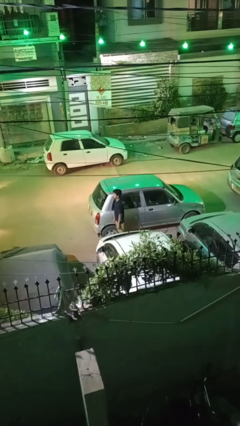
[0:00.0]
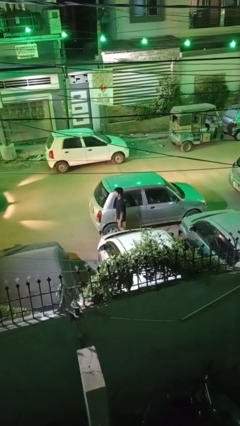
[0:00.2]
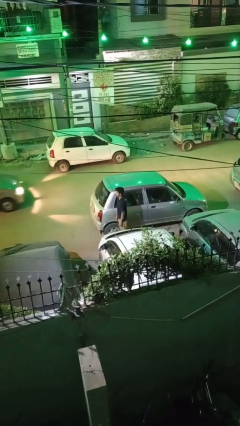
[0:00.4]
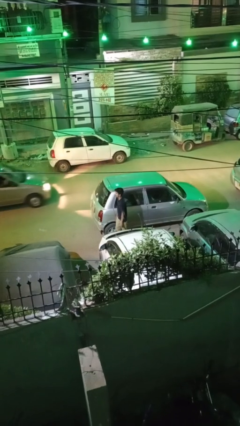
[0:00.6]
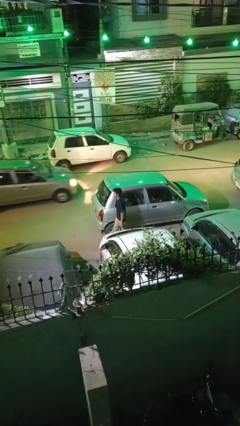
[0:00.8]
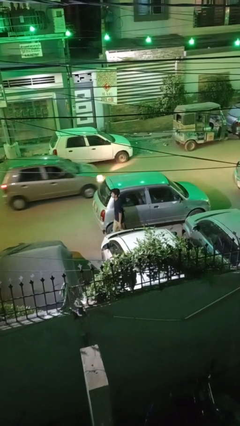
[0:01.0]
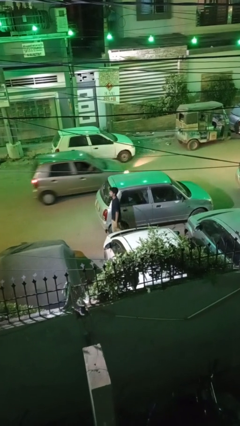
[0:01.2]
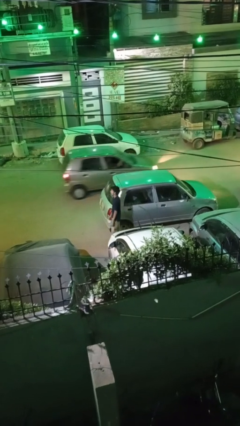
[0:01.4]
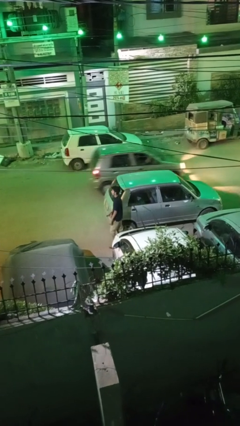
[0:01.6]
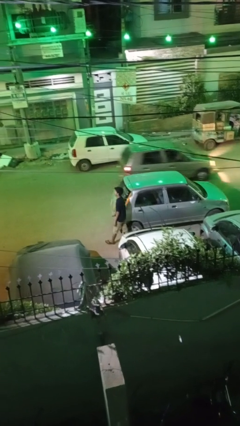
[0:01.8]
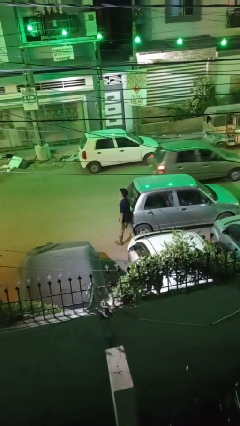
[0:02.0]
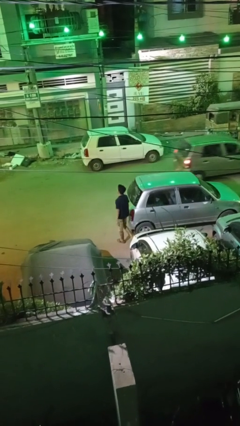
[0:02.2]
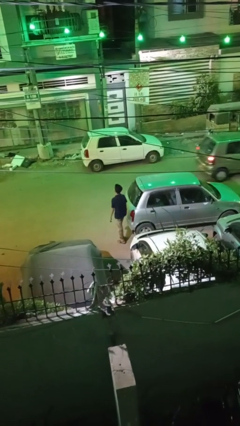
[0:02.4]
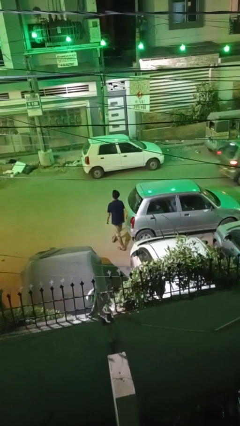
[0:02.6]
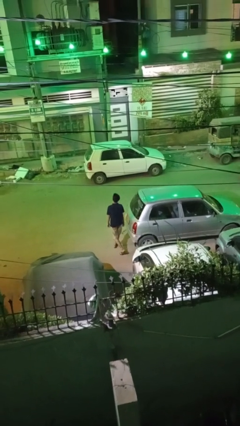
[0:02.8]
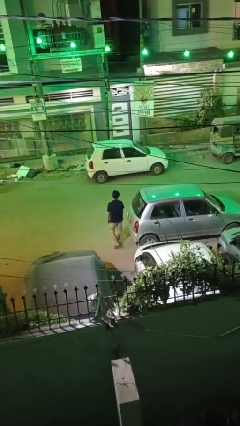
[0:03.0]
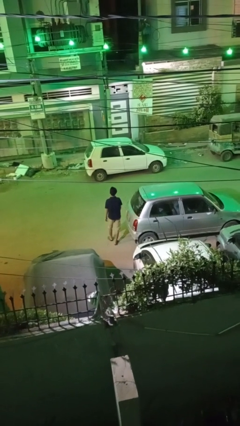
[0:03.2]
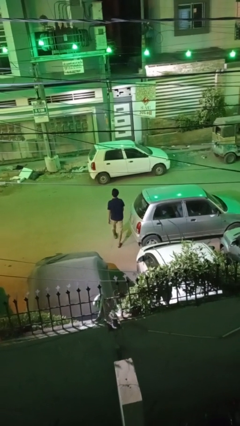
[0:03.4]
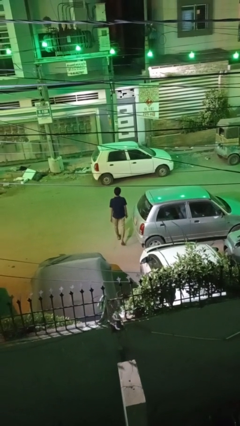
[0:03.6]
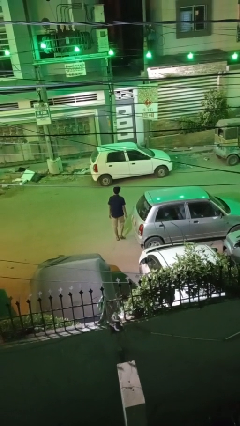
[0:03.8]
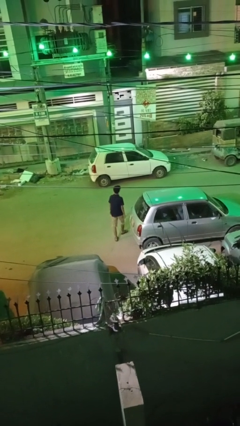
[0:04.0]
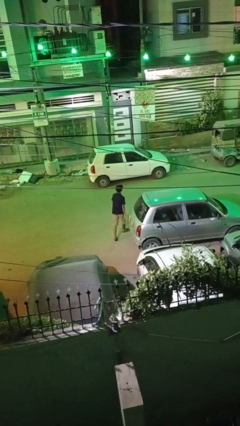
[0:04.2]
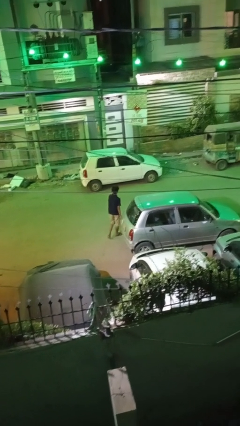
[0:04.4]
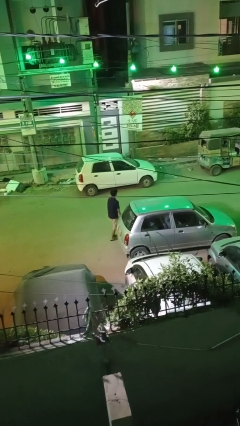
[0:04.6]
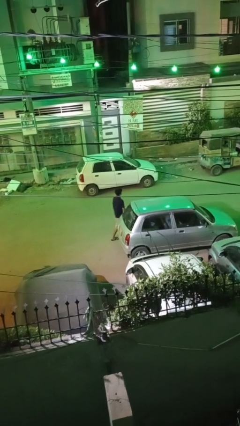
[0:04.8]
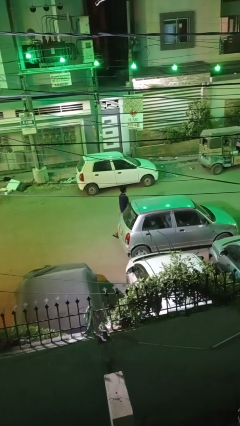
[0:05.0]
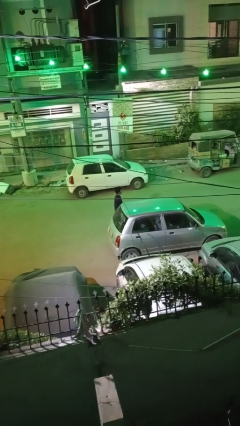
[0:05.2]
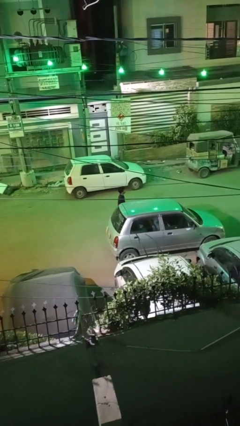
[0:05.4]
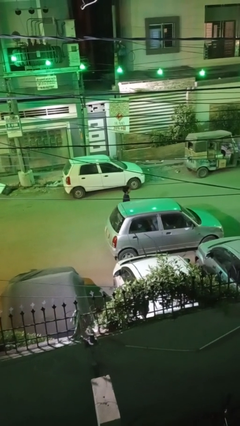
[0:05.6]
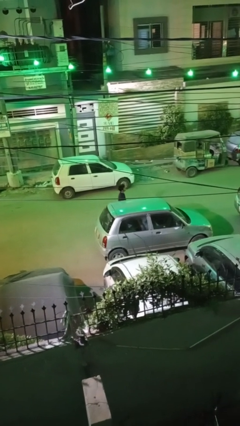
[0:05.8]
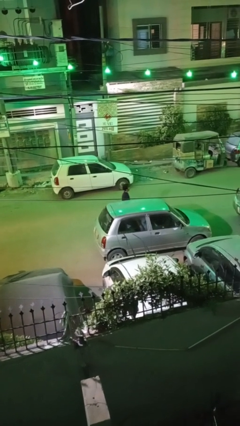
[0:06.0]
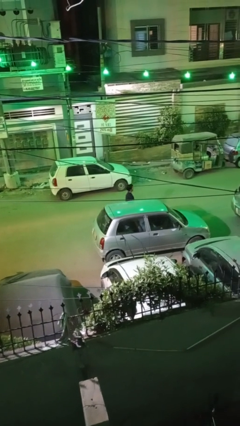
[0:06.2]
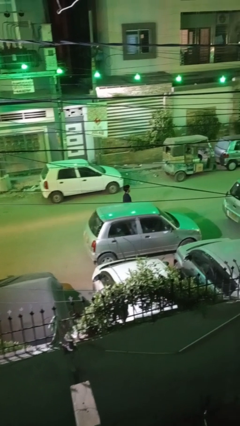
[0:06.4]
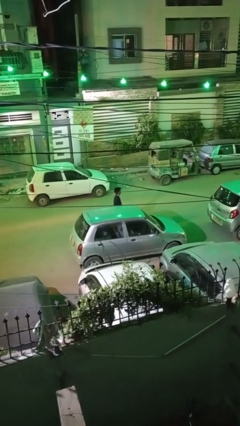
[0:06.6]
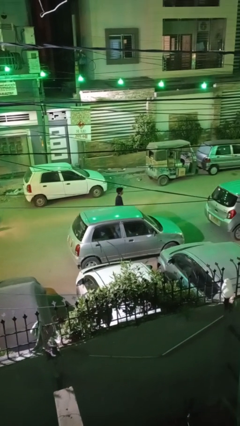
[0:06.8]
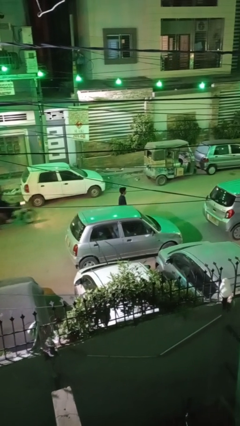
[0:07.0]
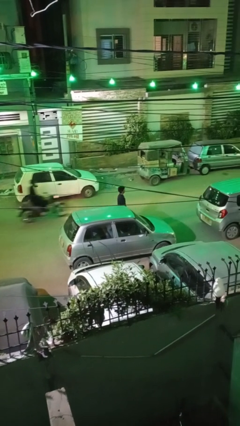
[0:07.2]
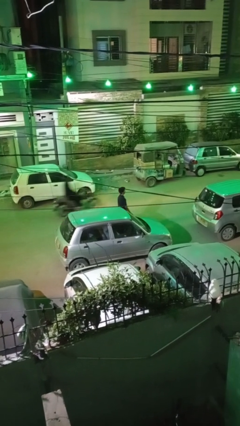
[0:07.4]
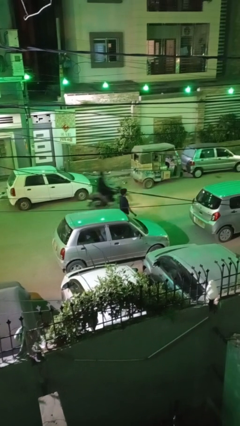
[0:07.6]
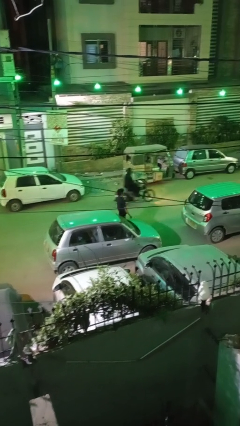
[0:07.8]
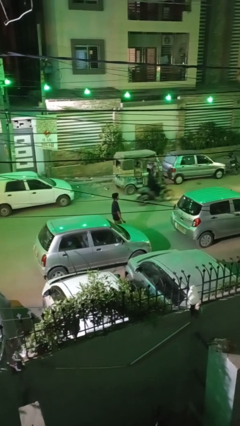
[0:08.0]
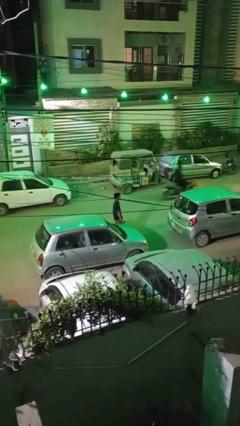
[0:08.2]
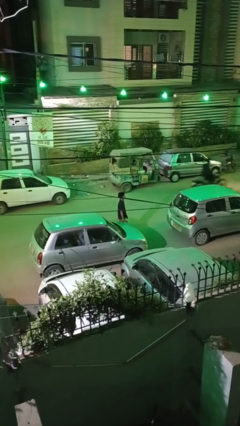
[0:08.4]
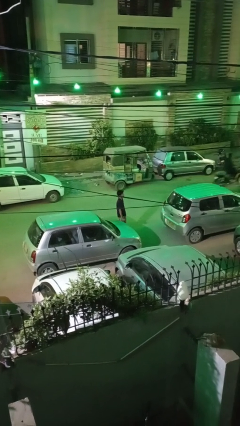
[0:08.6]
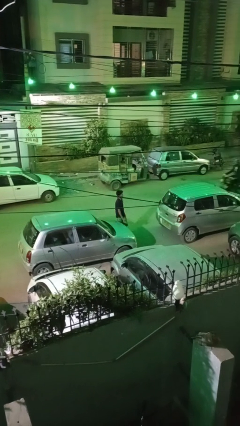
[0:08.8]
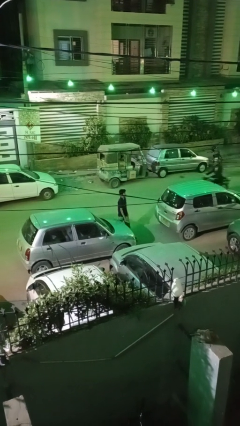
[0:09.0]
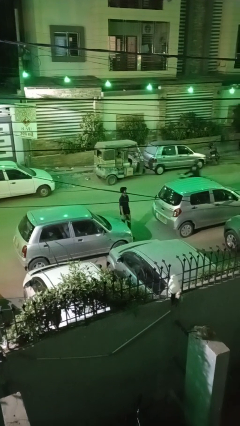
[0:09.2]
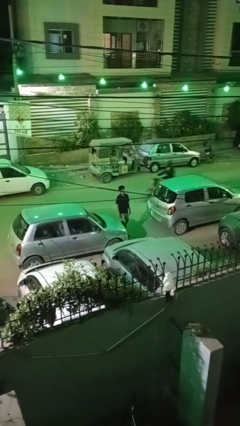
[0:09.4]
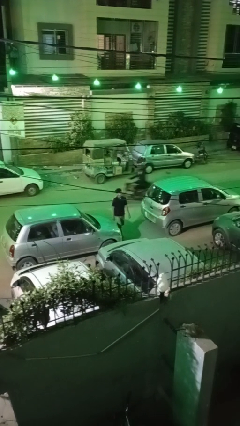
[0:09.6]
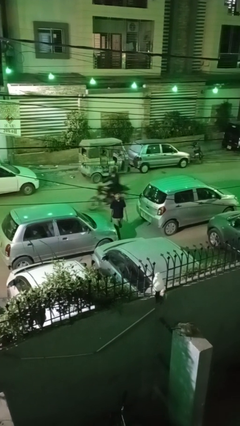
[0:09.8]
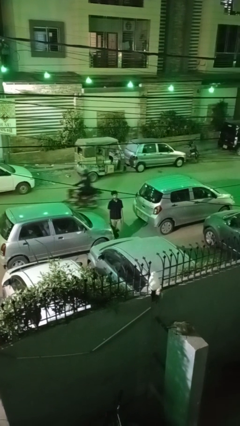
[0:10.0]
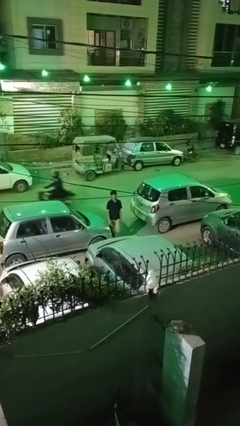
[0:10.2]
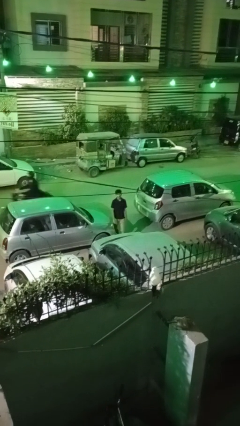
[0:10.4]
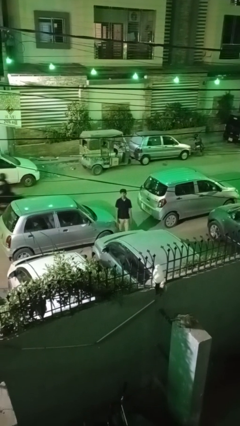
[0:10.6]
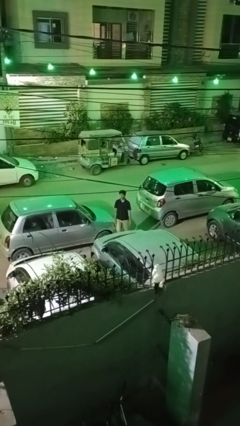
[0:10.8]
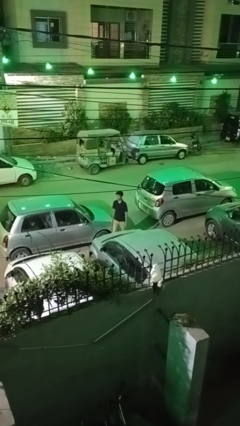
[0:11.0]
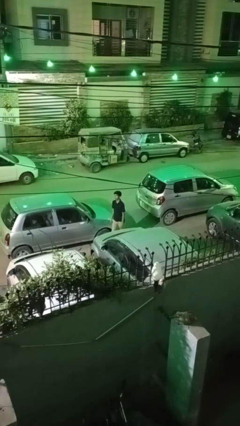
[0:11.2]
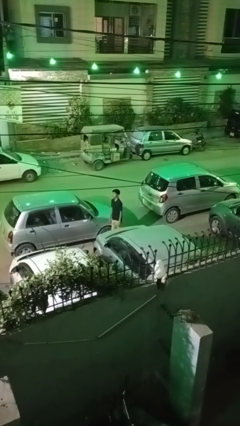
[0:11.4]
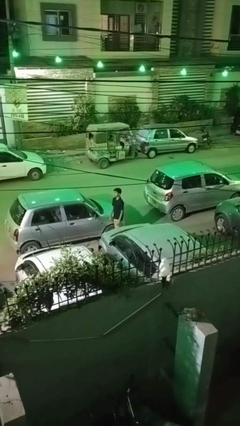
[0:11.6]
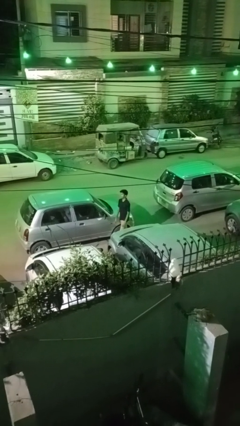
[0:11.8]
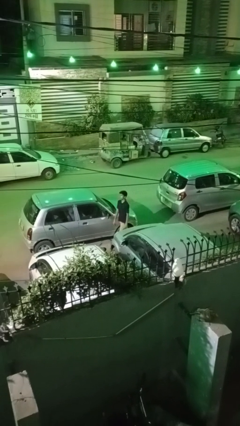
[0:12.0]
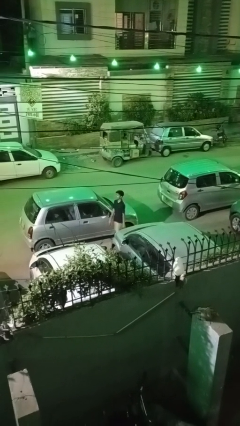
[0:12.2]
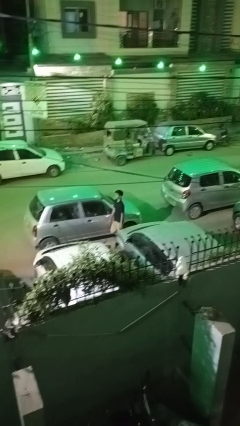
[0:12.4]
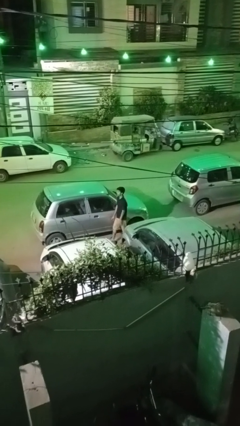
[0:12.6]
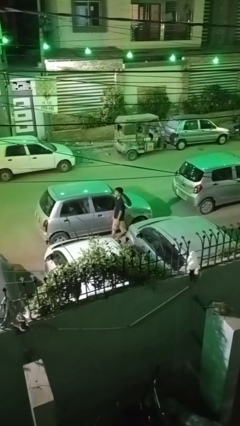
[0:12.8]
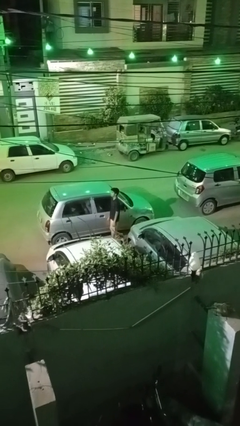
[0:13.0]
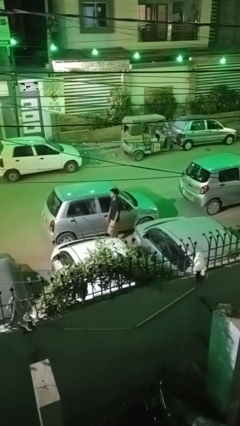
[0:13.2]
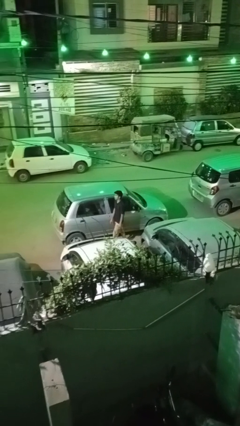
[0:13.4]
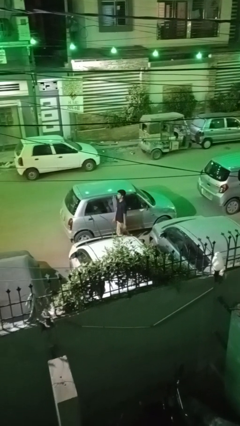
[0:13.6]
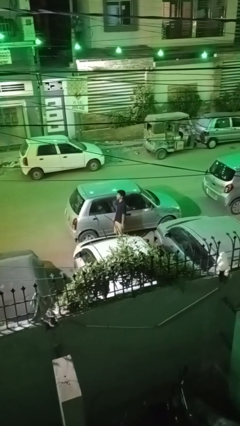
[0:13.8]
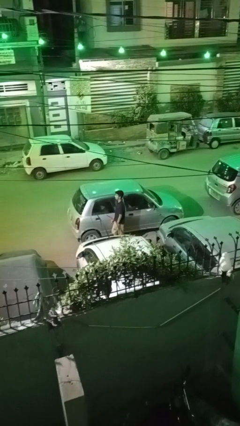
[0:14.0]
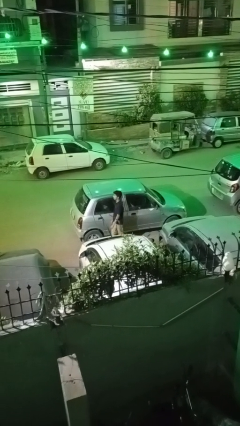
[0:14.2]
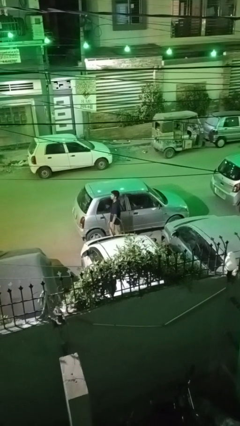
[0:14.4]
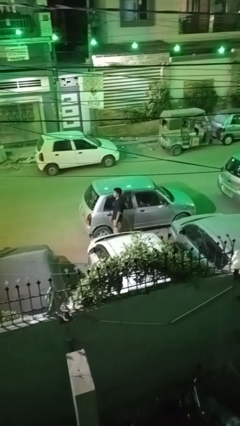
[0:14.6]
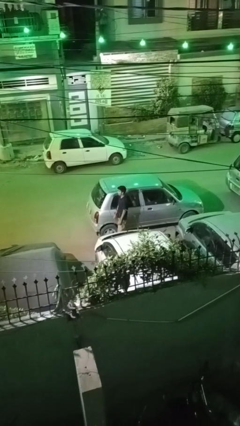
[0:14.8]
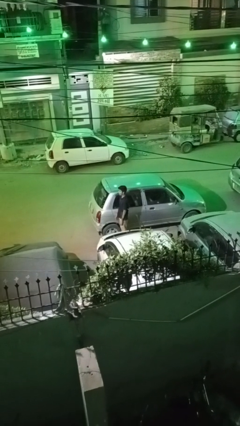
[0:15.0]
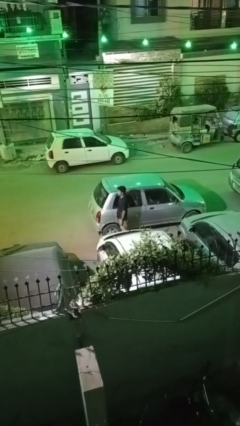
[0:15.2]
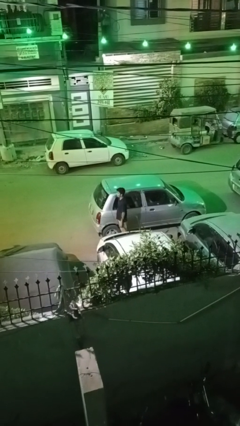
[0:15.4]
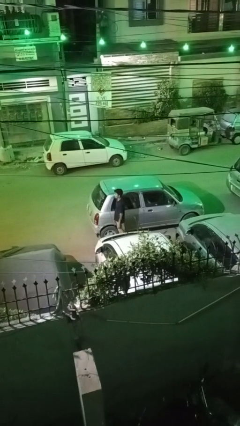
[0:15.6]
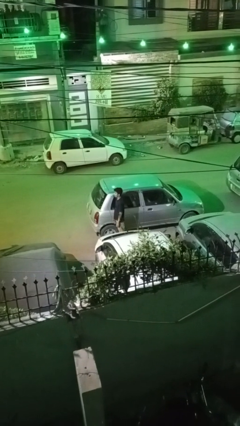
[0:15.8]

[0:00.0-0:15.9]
person walks around car

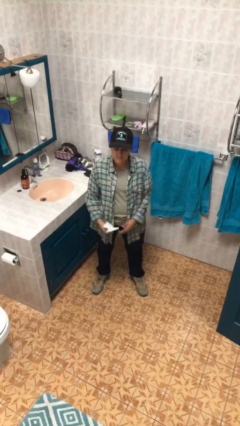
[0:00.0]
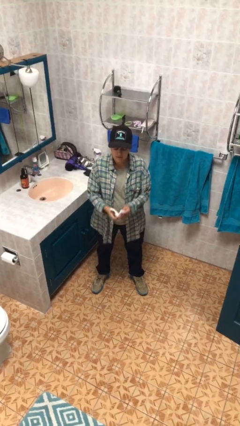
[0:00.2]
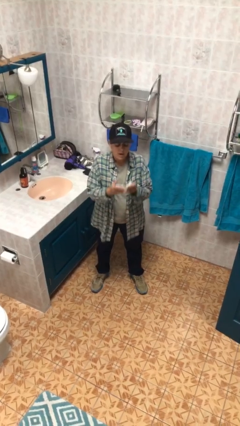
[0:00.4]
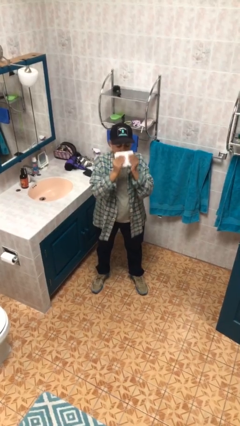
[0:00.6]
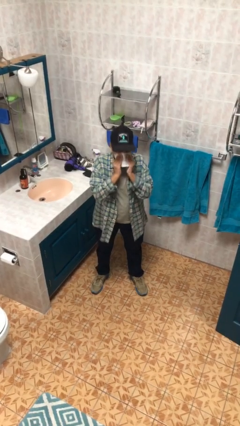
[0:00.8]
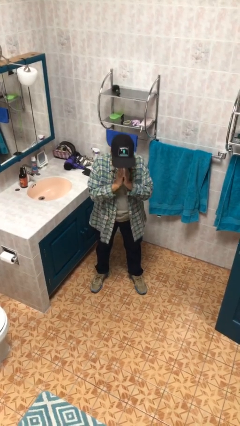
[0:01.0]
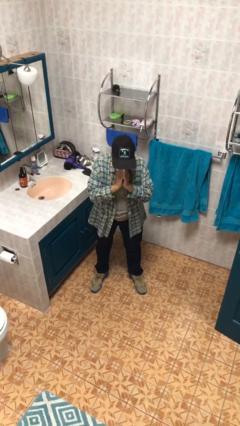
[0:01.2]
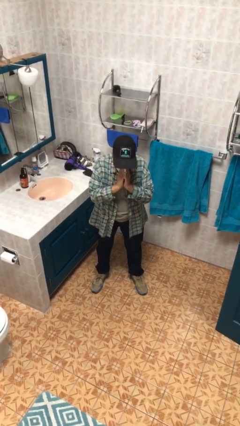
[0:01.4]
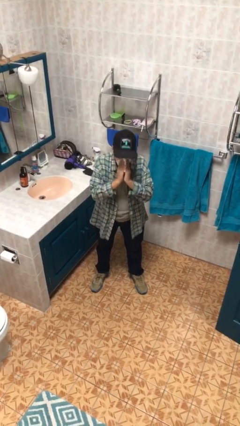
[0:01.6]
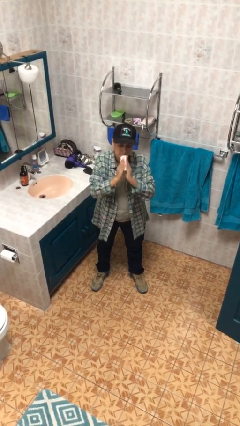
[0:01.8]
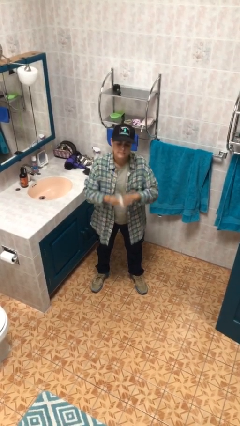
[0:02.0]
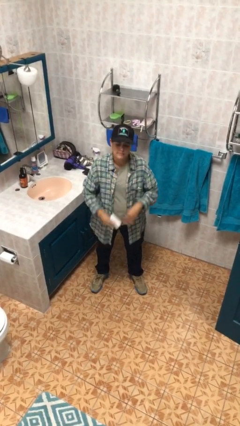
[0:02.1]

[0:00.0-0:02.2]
person blows nose
